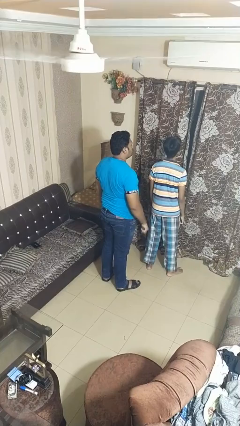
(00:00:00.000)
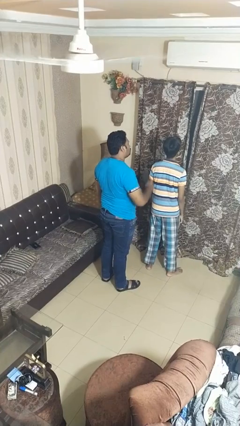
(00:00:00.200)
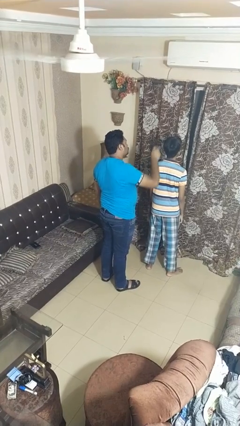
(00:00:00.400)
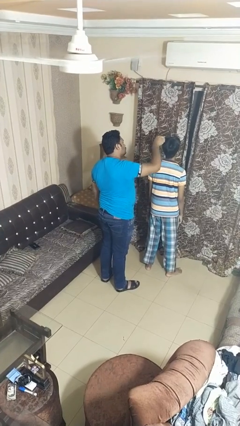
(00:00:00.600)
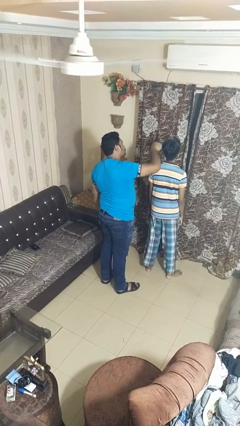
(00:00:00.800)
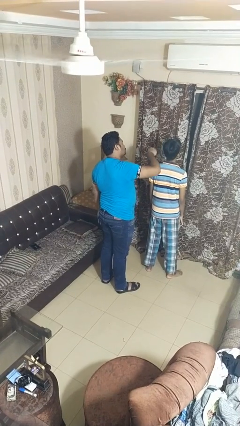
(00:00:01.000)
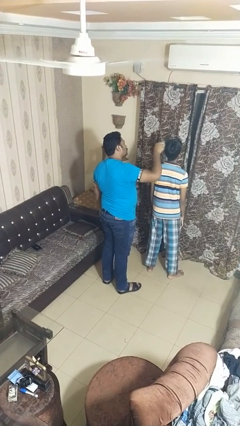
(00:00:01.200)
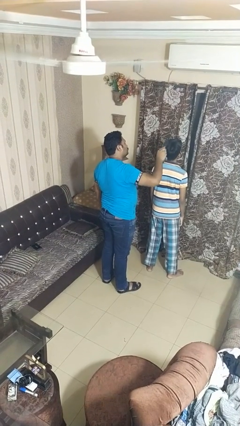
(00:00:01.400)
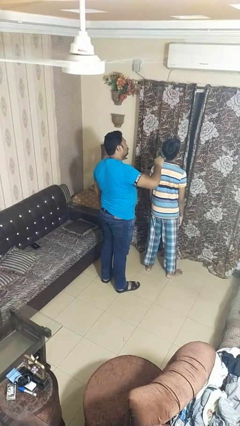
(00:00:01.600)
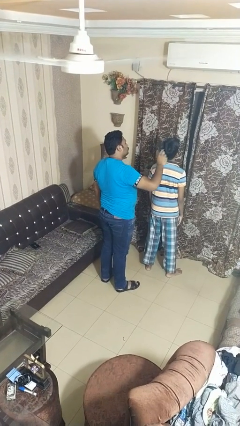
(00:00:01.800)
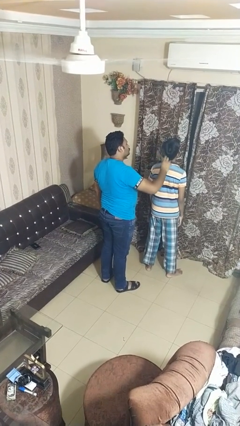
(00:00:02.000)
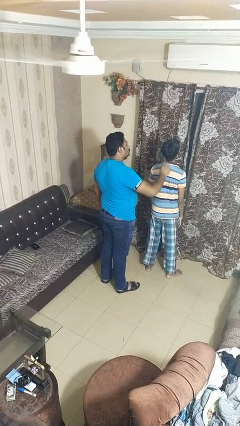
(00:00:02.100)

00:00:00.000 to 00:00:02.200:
person brushes hair of person

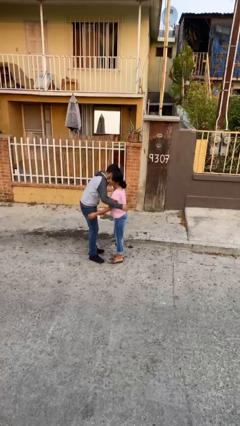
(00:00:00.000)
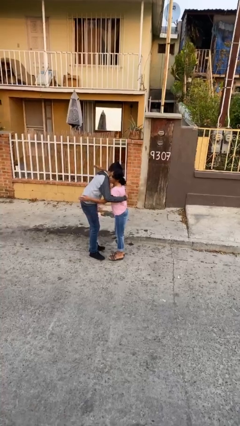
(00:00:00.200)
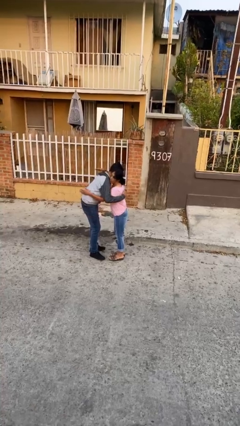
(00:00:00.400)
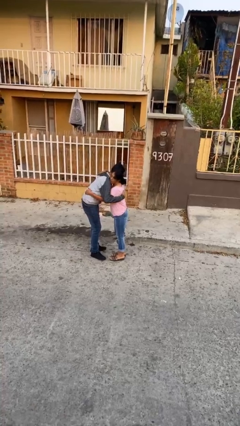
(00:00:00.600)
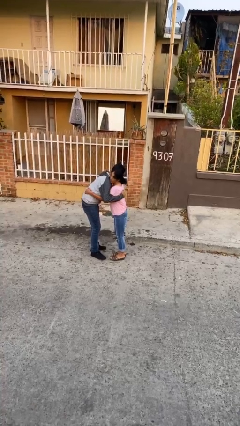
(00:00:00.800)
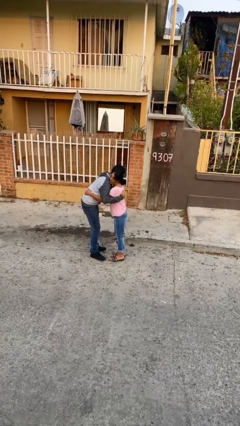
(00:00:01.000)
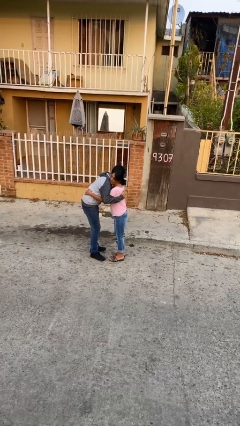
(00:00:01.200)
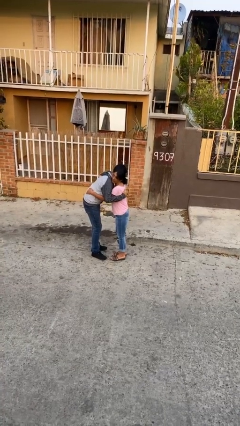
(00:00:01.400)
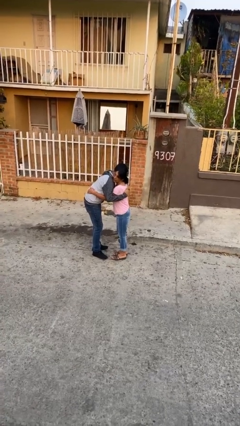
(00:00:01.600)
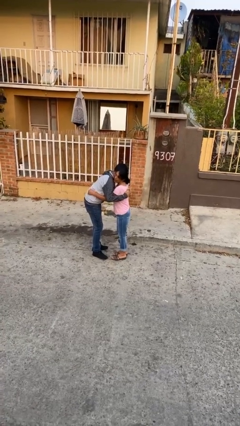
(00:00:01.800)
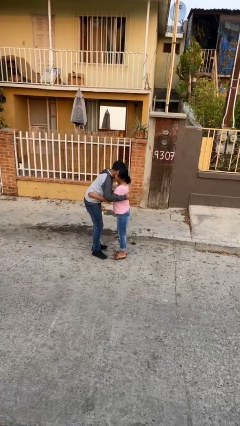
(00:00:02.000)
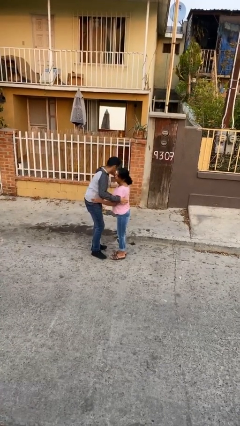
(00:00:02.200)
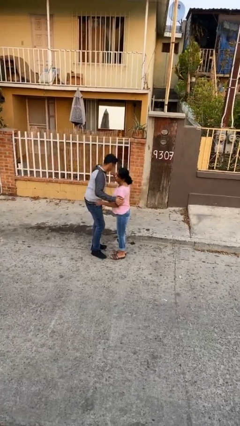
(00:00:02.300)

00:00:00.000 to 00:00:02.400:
person embraces person

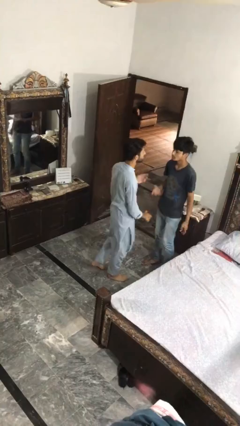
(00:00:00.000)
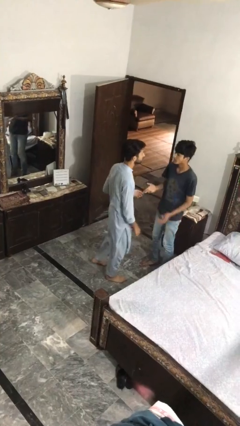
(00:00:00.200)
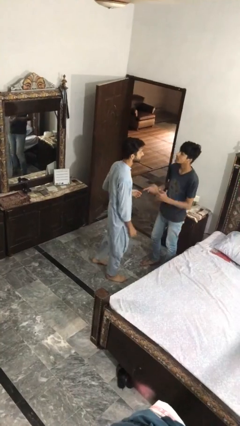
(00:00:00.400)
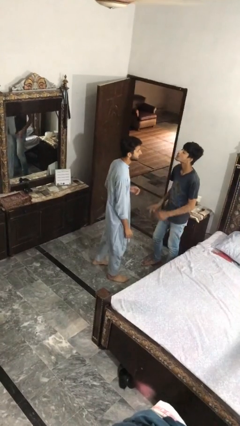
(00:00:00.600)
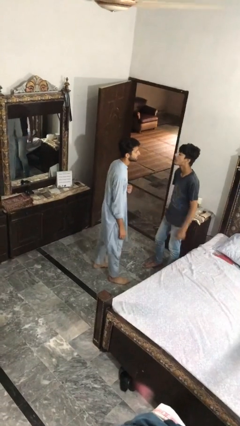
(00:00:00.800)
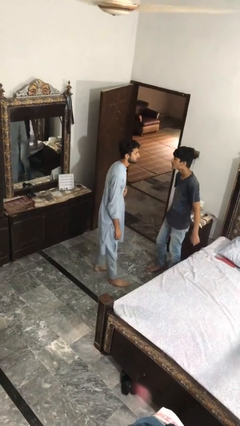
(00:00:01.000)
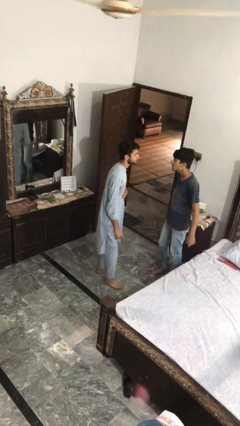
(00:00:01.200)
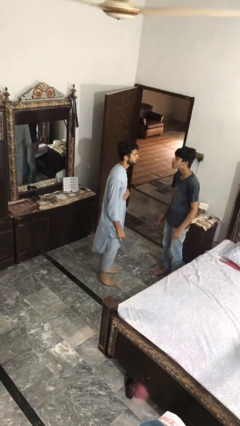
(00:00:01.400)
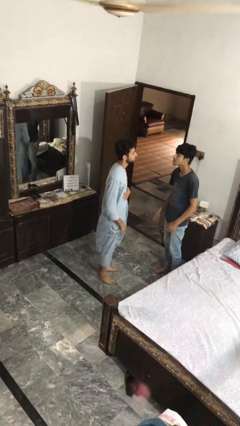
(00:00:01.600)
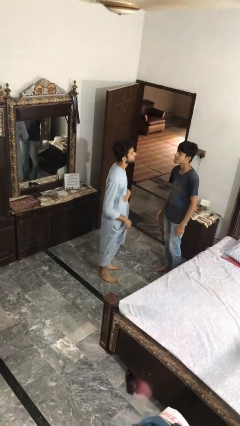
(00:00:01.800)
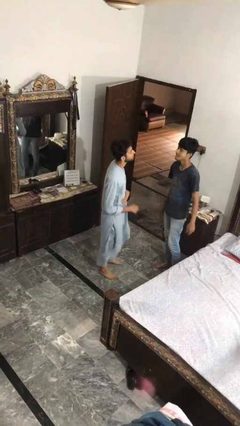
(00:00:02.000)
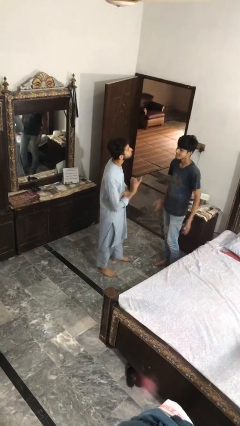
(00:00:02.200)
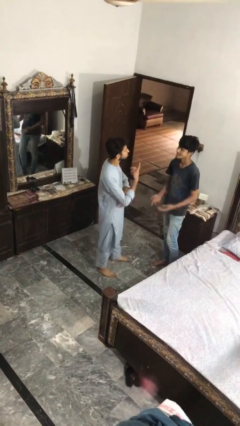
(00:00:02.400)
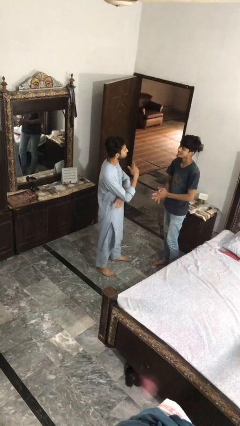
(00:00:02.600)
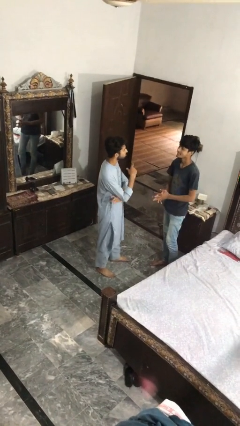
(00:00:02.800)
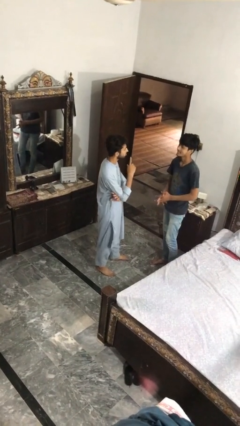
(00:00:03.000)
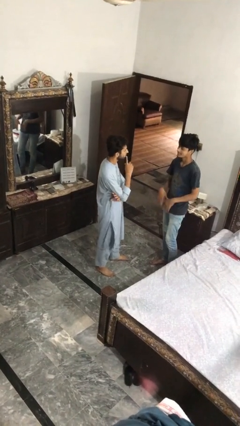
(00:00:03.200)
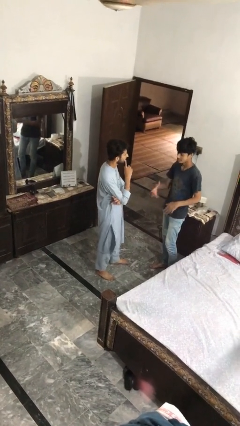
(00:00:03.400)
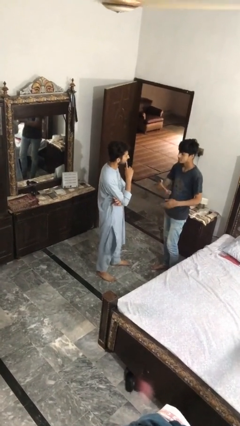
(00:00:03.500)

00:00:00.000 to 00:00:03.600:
person talks to person

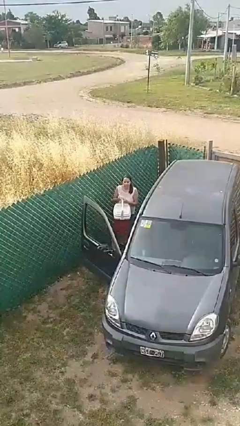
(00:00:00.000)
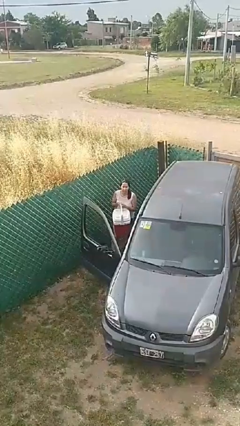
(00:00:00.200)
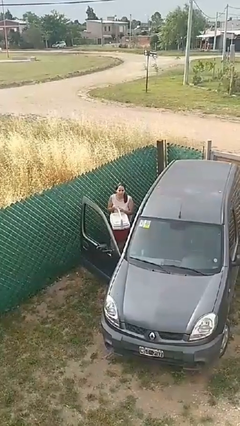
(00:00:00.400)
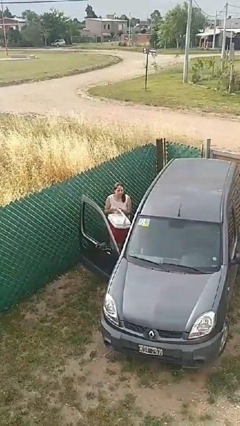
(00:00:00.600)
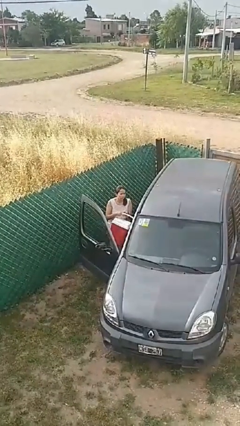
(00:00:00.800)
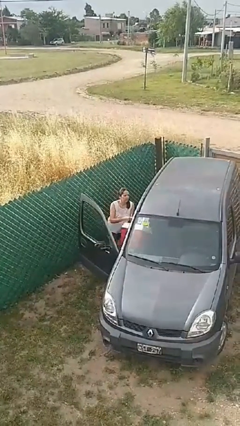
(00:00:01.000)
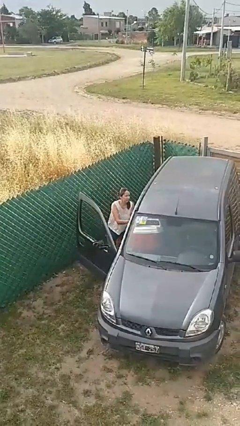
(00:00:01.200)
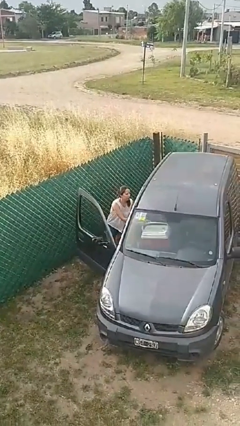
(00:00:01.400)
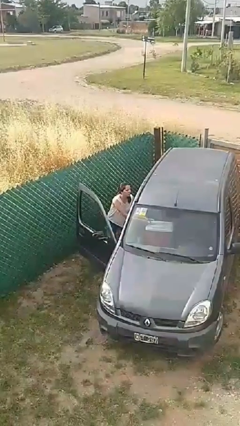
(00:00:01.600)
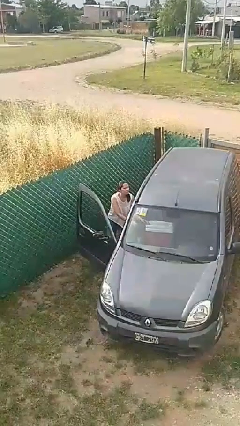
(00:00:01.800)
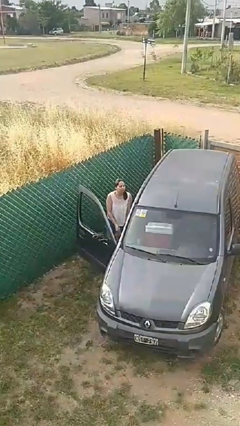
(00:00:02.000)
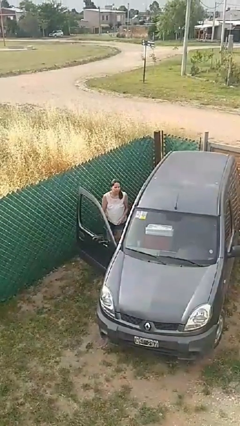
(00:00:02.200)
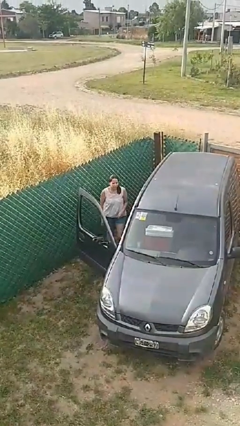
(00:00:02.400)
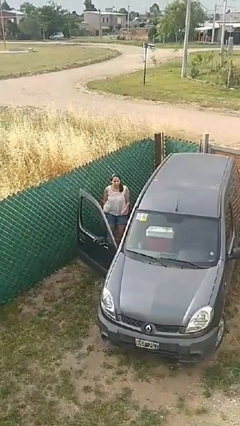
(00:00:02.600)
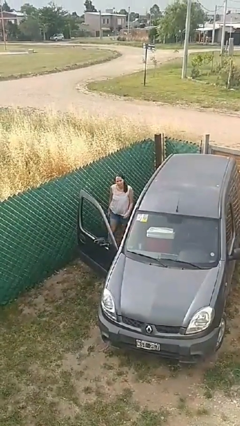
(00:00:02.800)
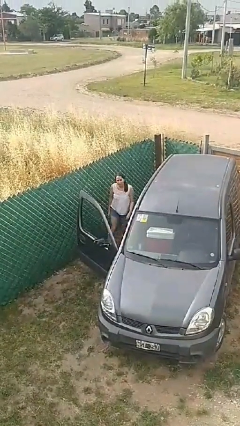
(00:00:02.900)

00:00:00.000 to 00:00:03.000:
person loads car

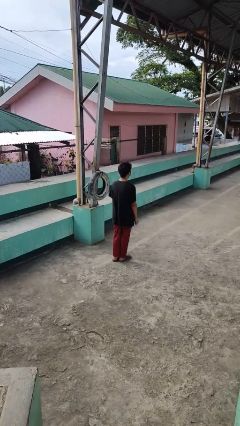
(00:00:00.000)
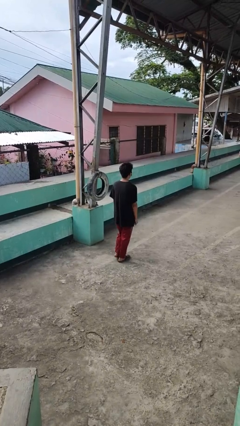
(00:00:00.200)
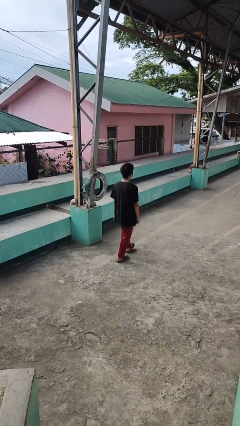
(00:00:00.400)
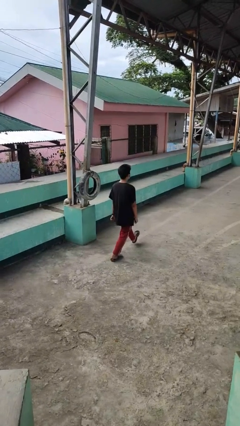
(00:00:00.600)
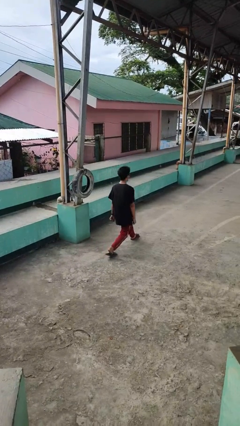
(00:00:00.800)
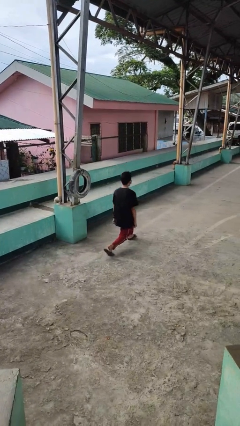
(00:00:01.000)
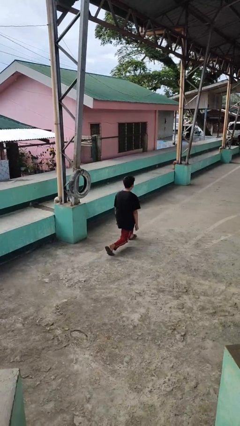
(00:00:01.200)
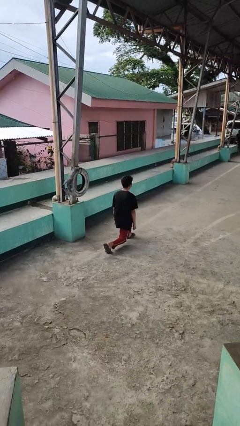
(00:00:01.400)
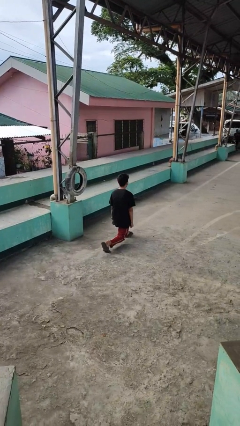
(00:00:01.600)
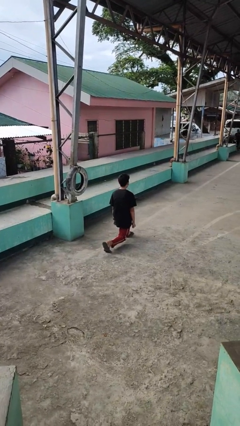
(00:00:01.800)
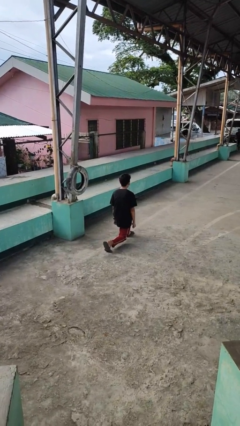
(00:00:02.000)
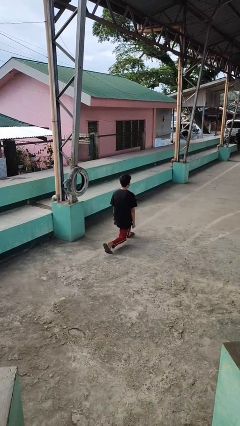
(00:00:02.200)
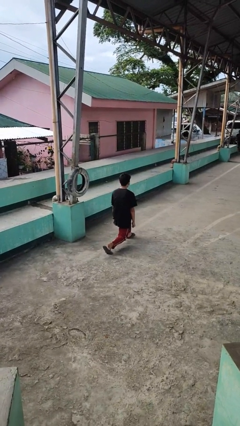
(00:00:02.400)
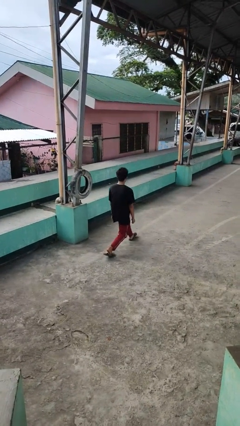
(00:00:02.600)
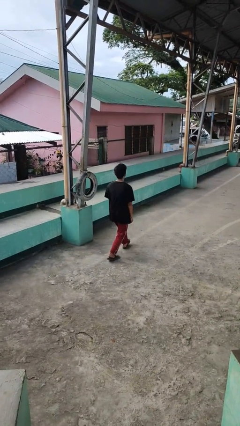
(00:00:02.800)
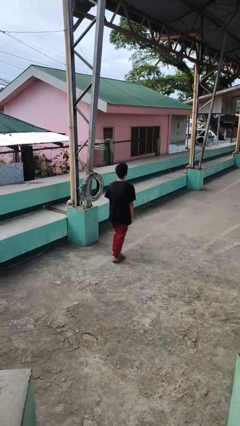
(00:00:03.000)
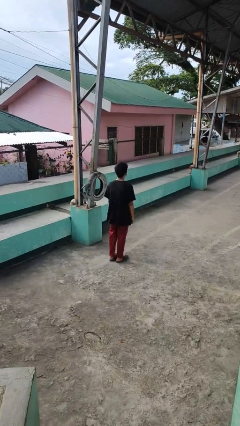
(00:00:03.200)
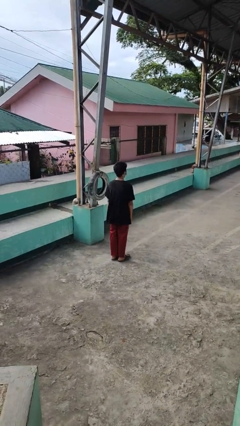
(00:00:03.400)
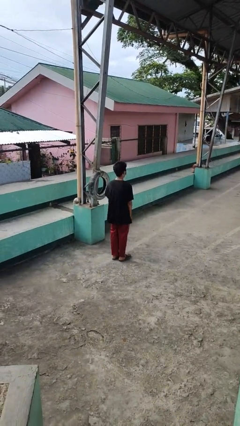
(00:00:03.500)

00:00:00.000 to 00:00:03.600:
person exercises with lunges

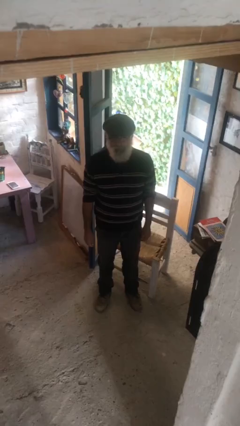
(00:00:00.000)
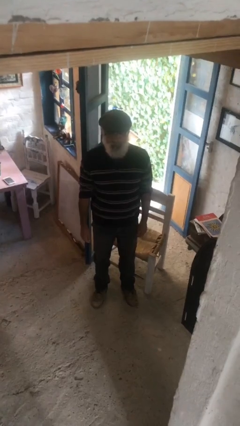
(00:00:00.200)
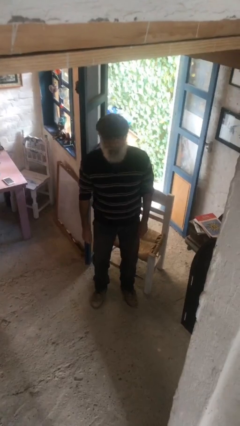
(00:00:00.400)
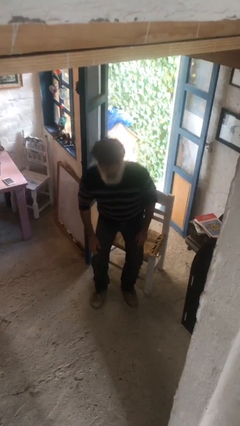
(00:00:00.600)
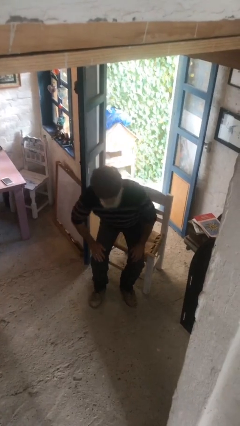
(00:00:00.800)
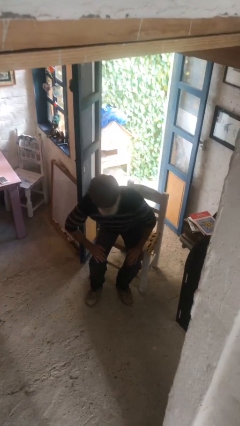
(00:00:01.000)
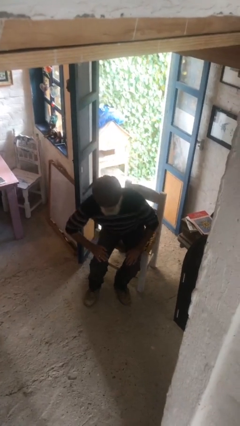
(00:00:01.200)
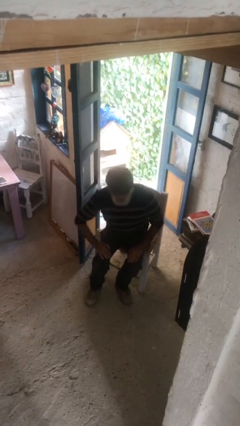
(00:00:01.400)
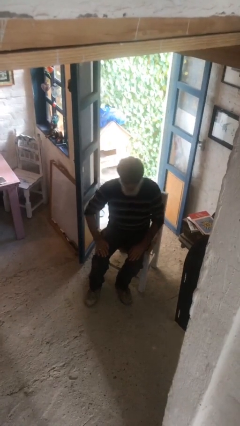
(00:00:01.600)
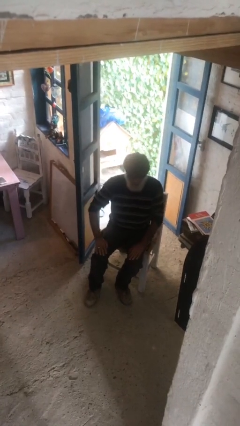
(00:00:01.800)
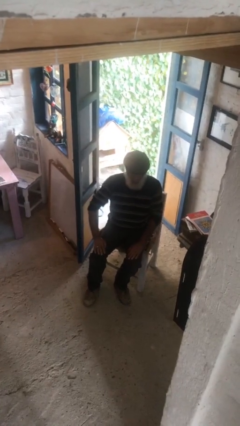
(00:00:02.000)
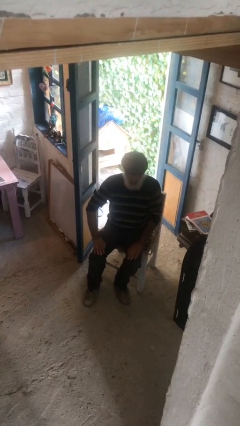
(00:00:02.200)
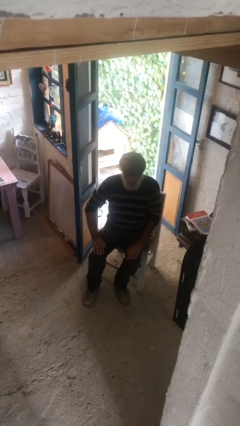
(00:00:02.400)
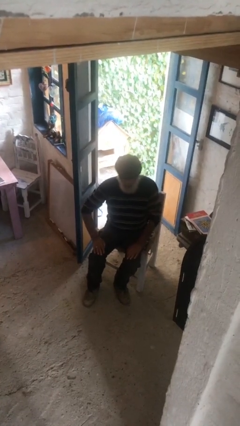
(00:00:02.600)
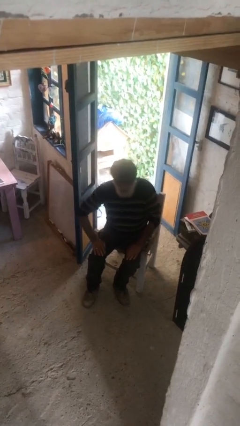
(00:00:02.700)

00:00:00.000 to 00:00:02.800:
person sits down
